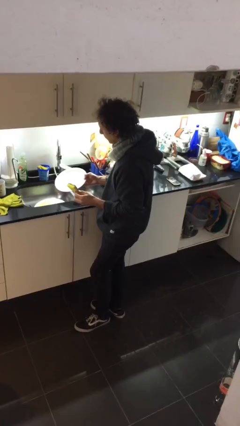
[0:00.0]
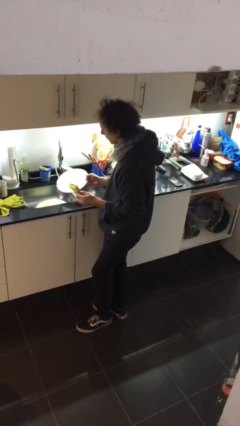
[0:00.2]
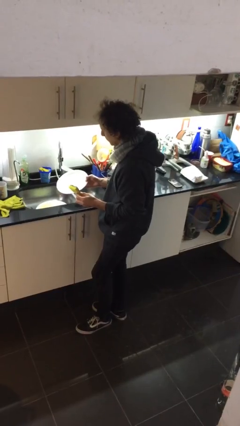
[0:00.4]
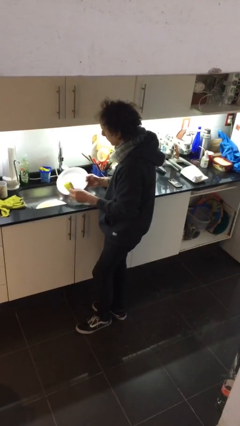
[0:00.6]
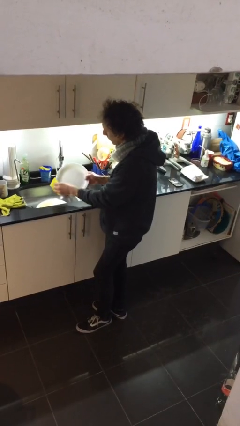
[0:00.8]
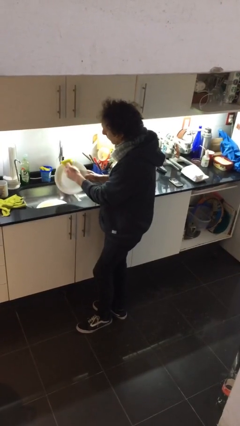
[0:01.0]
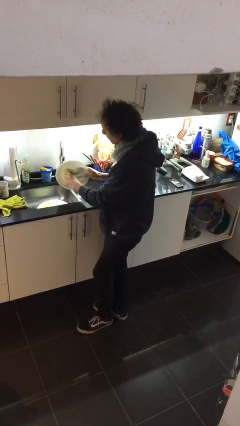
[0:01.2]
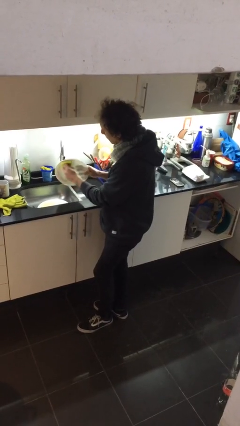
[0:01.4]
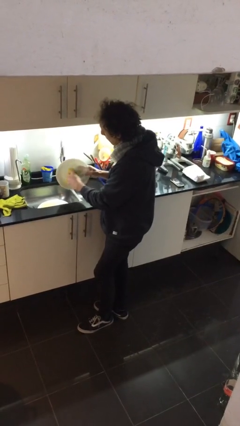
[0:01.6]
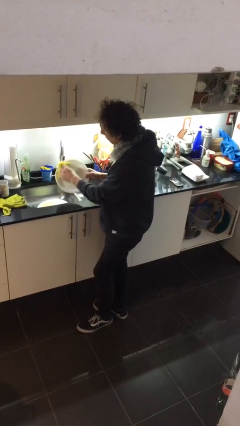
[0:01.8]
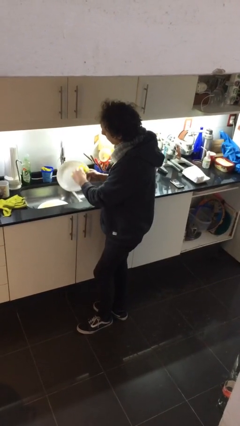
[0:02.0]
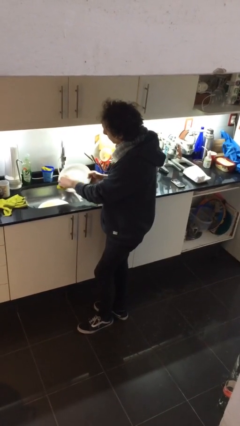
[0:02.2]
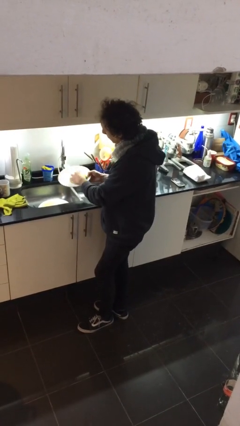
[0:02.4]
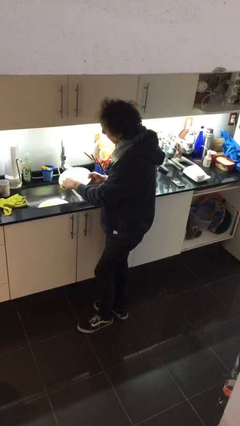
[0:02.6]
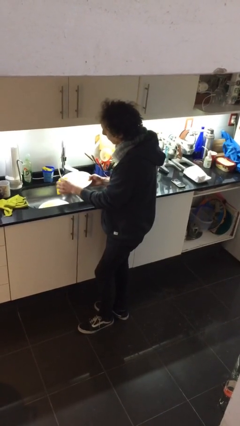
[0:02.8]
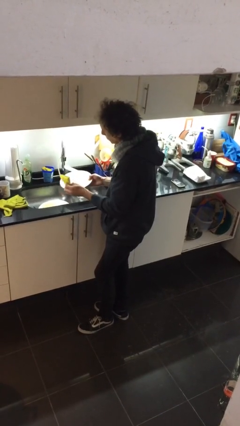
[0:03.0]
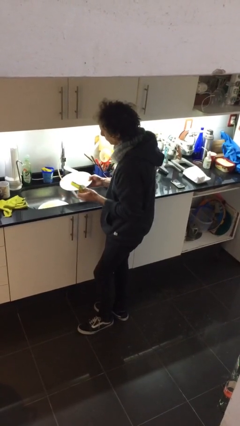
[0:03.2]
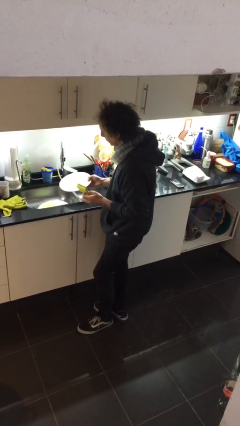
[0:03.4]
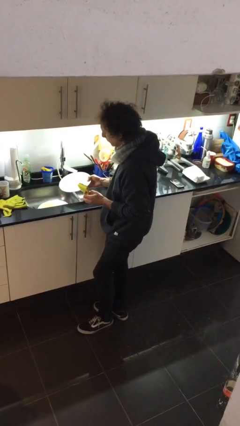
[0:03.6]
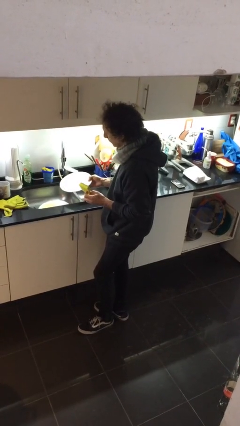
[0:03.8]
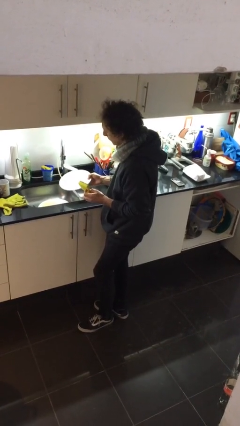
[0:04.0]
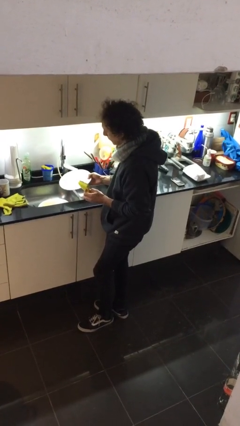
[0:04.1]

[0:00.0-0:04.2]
person washes dish

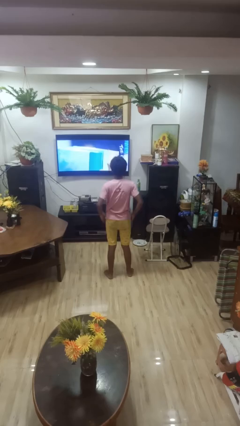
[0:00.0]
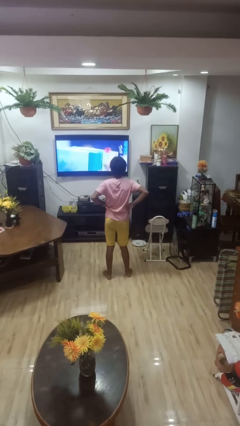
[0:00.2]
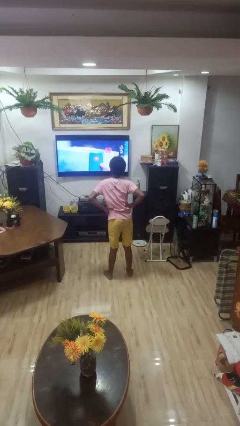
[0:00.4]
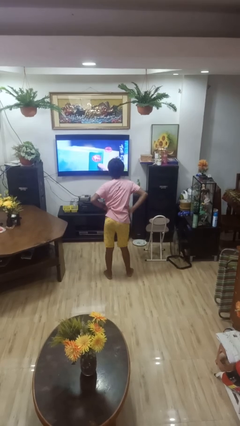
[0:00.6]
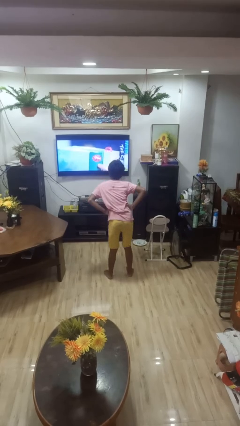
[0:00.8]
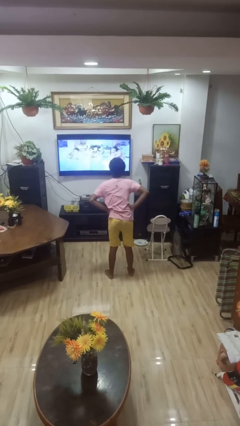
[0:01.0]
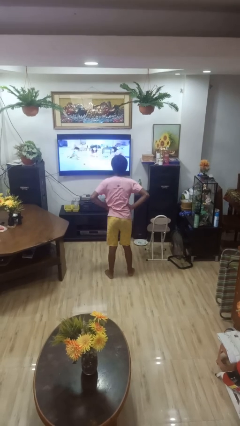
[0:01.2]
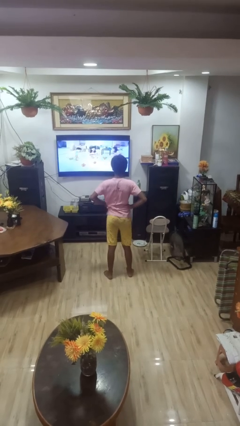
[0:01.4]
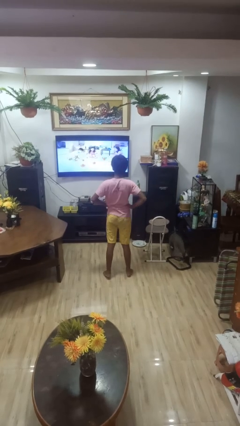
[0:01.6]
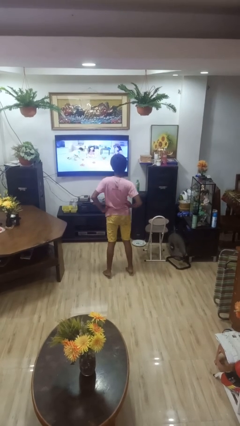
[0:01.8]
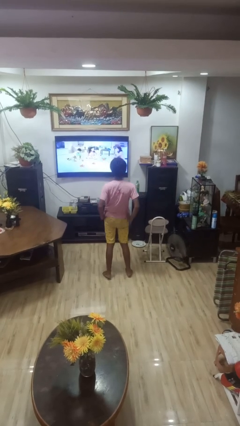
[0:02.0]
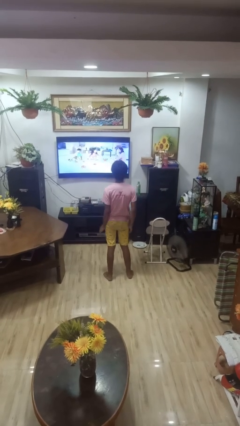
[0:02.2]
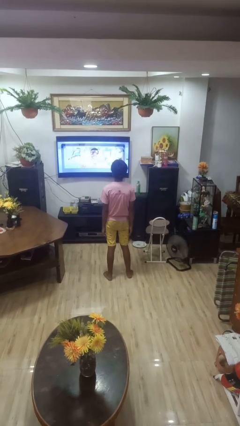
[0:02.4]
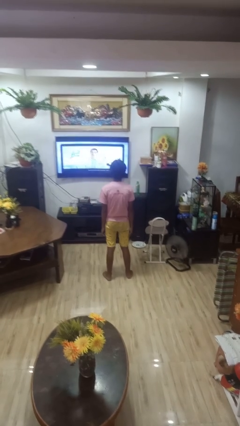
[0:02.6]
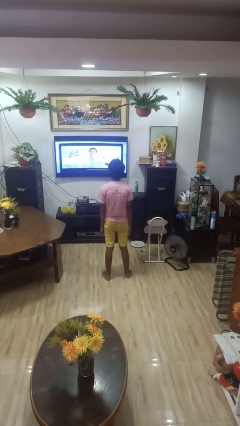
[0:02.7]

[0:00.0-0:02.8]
person wiggles hips

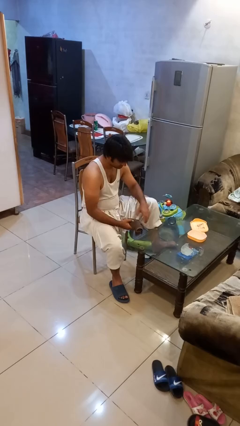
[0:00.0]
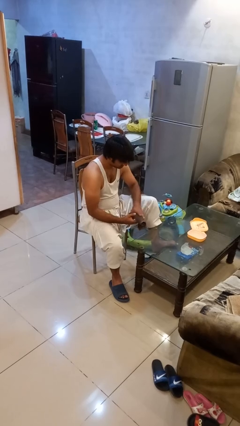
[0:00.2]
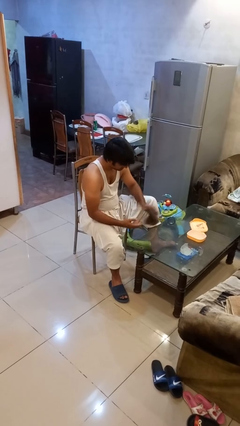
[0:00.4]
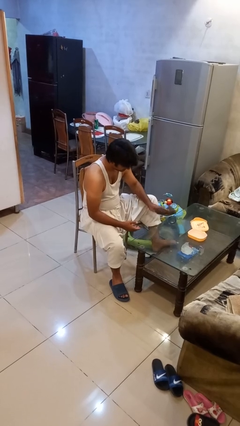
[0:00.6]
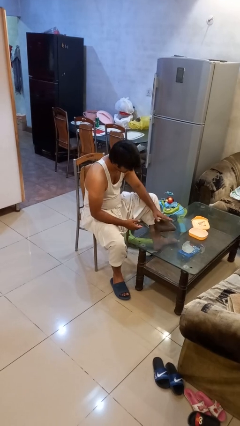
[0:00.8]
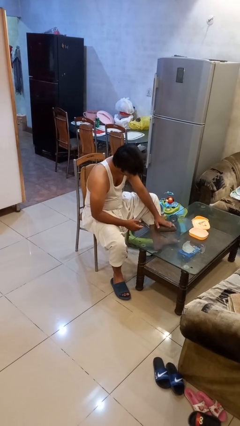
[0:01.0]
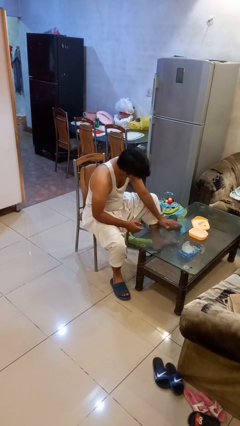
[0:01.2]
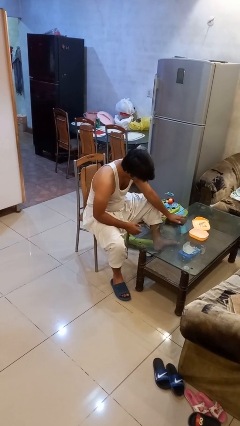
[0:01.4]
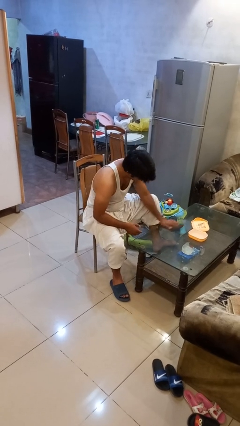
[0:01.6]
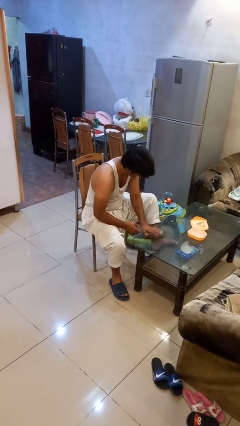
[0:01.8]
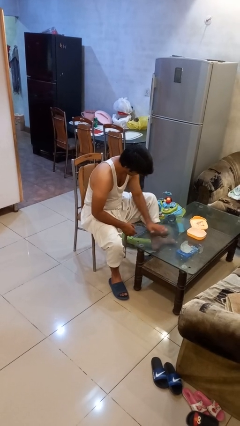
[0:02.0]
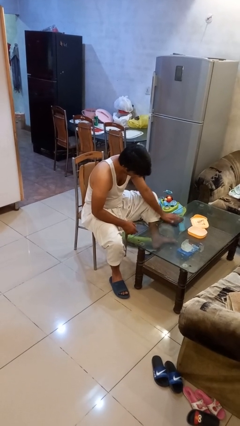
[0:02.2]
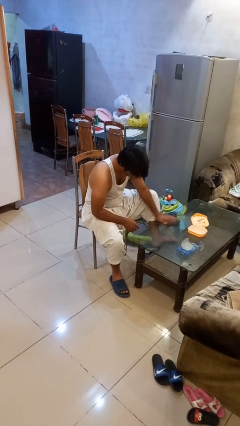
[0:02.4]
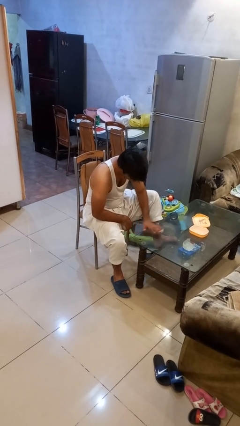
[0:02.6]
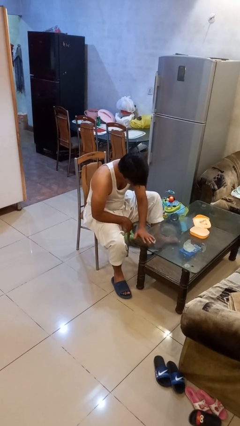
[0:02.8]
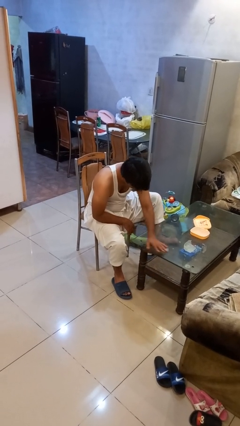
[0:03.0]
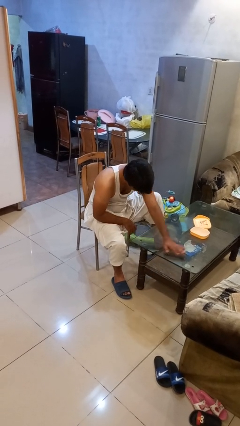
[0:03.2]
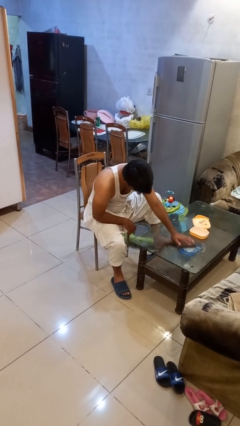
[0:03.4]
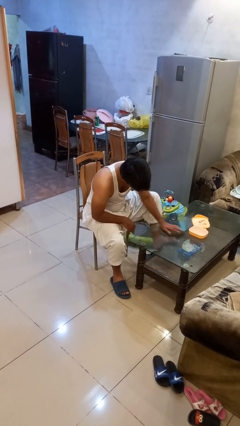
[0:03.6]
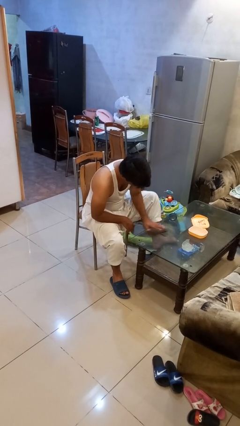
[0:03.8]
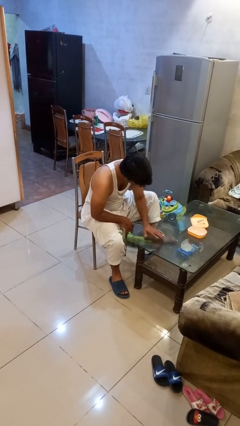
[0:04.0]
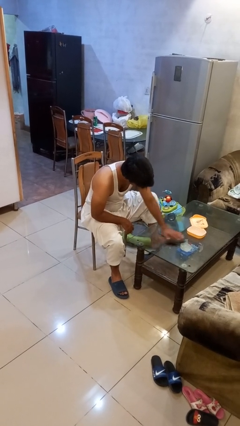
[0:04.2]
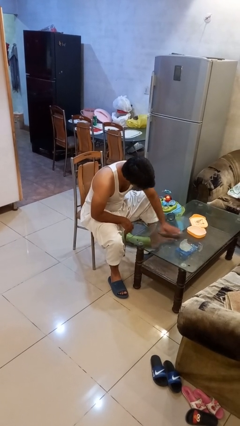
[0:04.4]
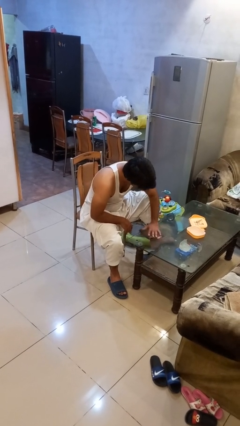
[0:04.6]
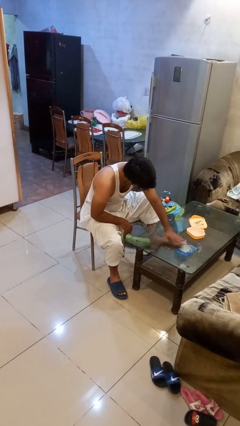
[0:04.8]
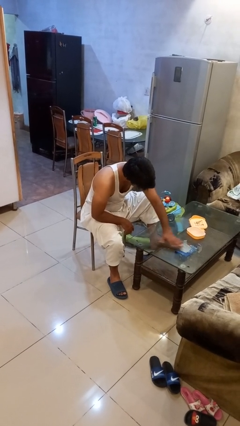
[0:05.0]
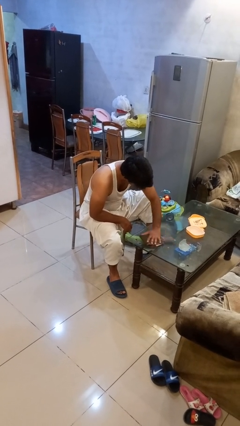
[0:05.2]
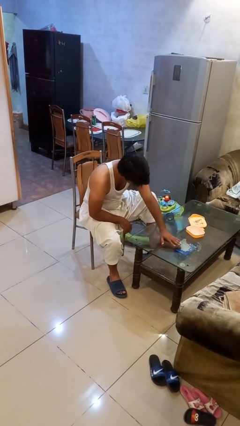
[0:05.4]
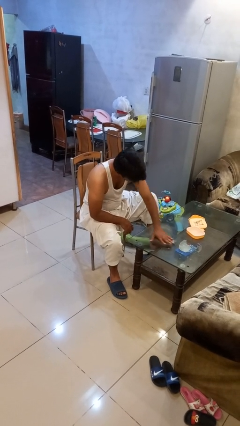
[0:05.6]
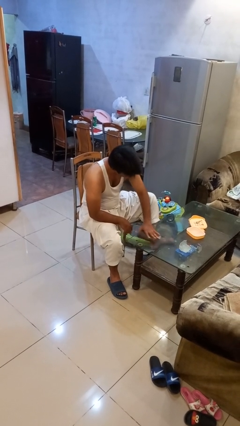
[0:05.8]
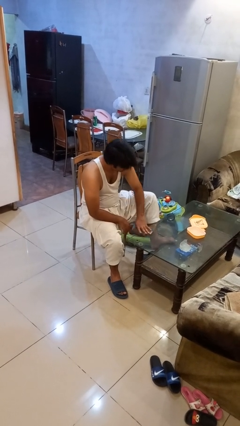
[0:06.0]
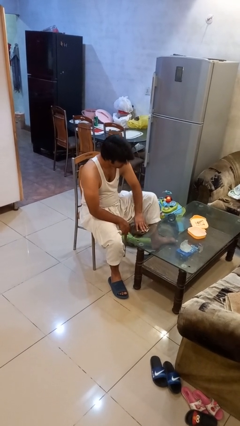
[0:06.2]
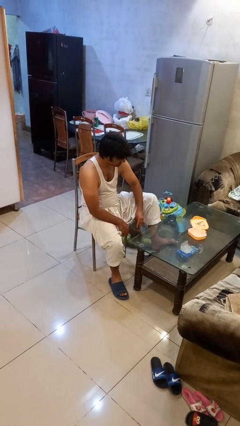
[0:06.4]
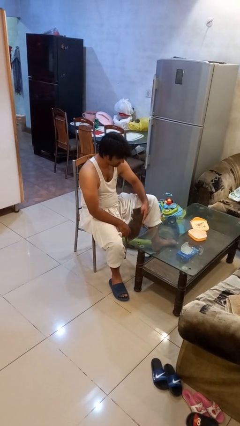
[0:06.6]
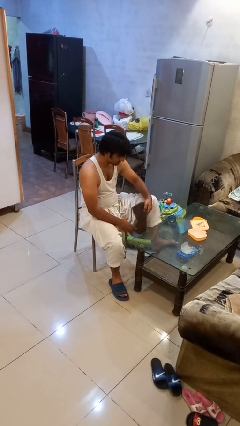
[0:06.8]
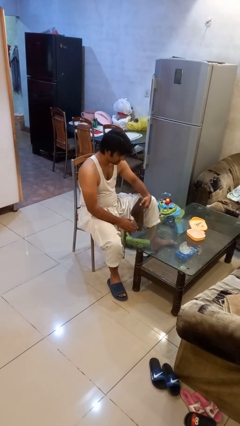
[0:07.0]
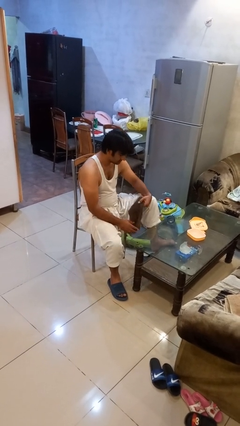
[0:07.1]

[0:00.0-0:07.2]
person cleans table with rag

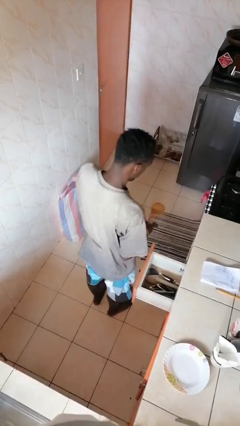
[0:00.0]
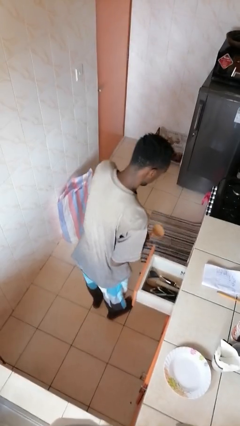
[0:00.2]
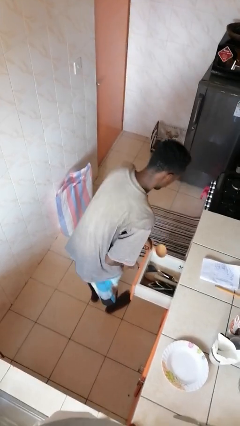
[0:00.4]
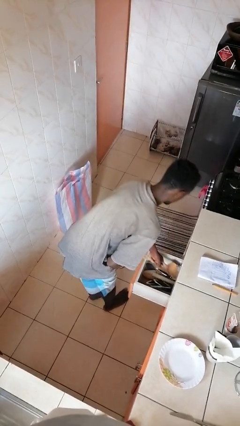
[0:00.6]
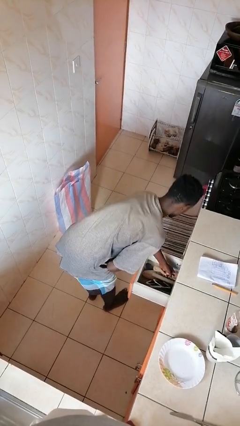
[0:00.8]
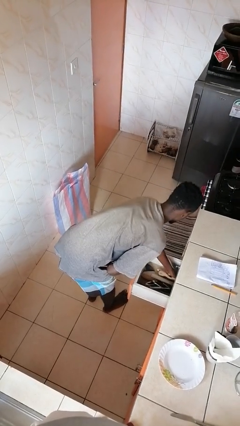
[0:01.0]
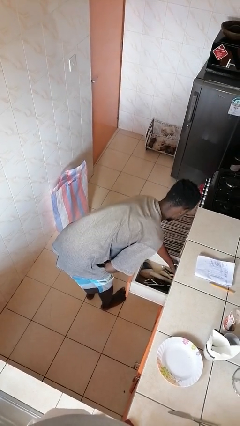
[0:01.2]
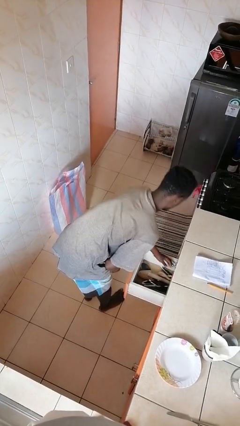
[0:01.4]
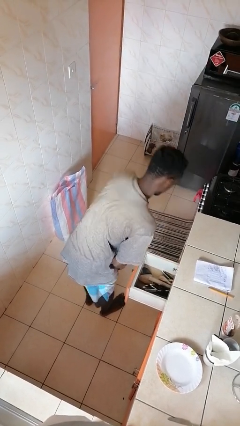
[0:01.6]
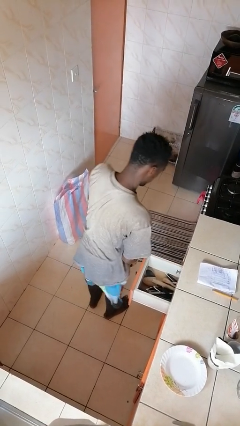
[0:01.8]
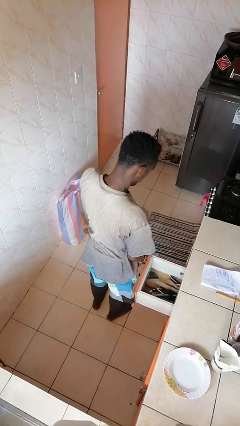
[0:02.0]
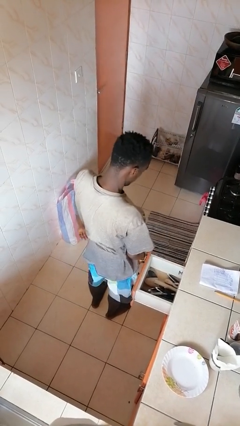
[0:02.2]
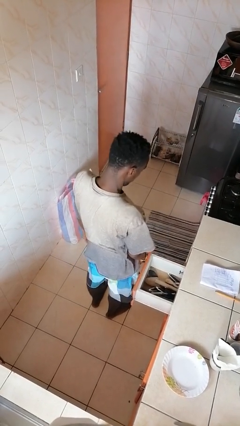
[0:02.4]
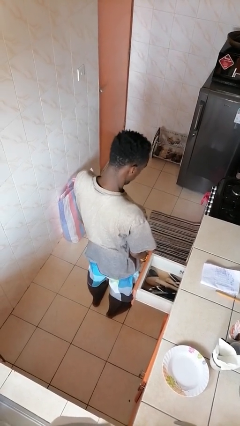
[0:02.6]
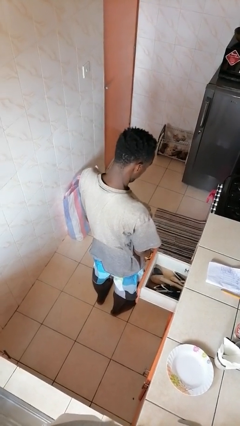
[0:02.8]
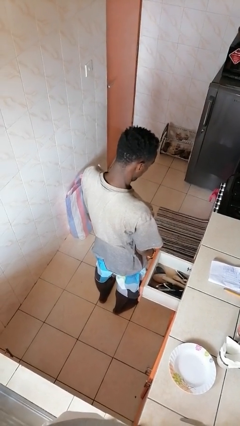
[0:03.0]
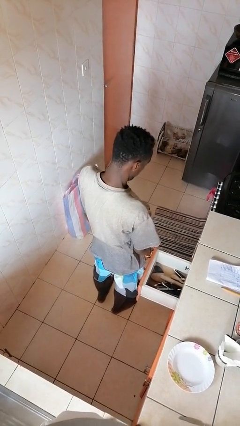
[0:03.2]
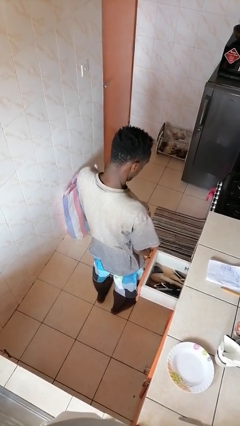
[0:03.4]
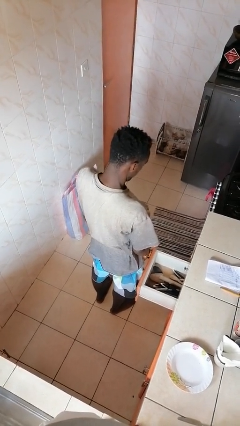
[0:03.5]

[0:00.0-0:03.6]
person puts object into kitchen drawer
